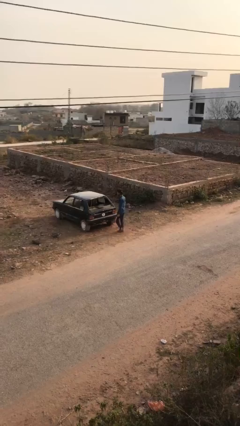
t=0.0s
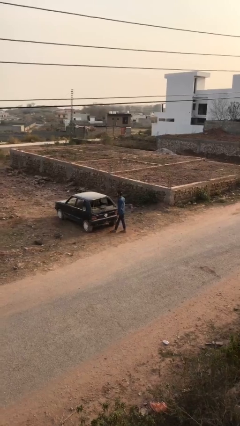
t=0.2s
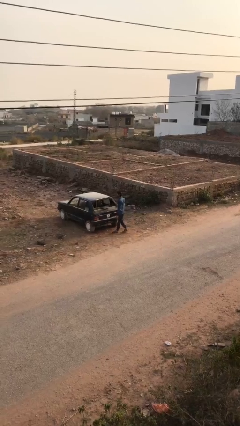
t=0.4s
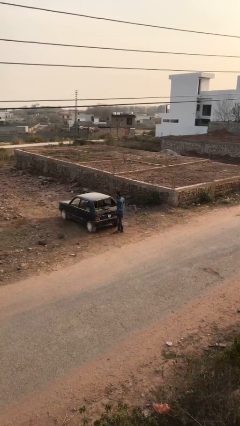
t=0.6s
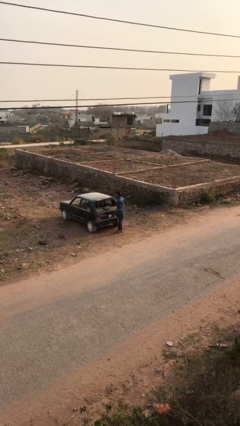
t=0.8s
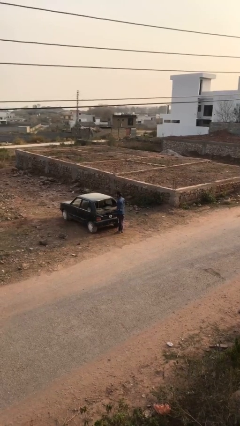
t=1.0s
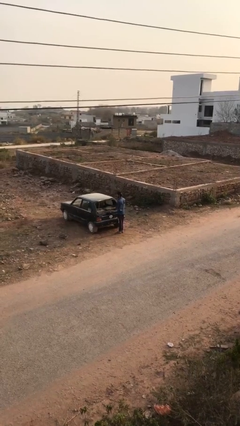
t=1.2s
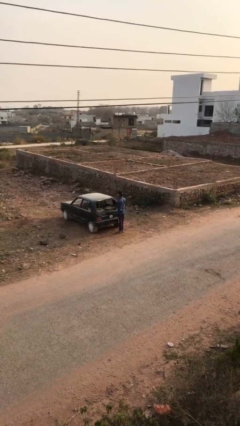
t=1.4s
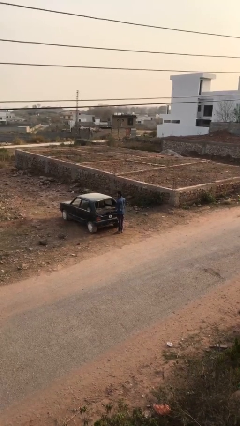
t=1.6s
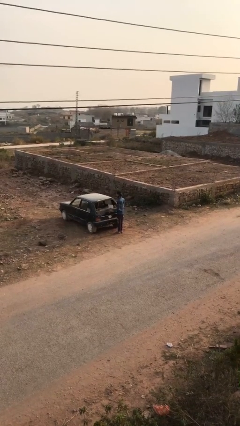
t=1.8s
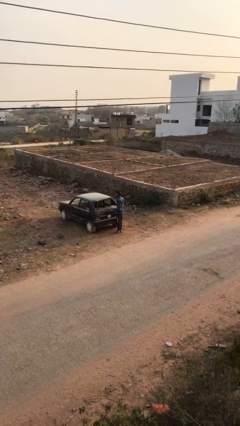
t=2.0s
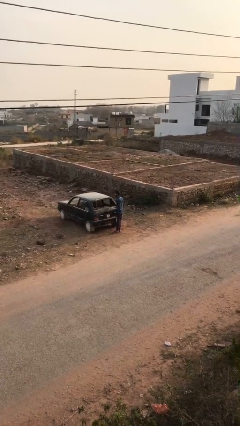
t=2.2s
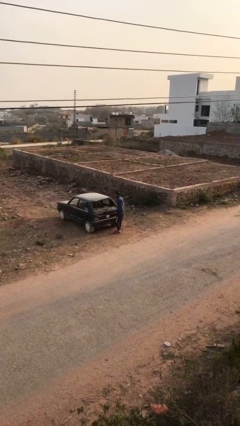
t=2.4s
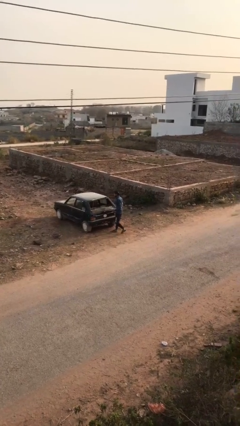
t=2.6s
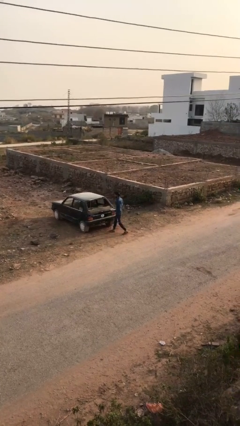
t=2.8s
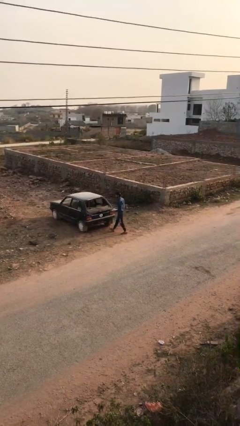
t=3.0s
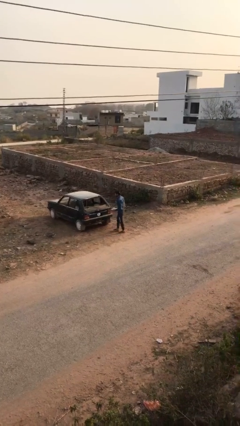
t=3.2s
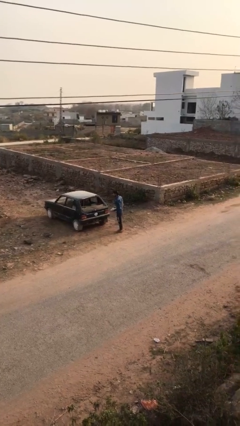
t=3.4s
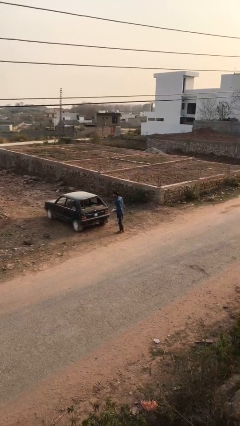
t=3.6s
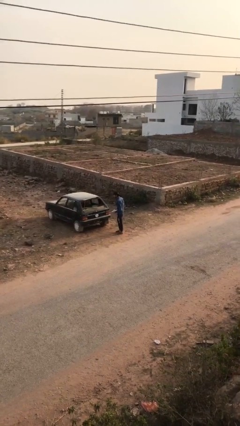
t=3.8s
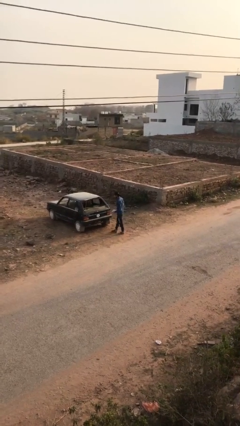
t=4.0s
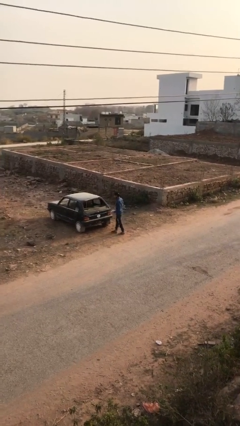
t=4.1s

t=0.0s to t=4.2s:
person unloads car

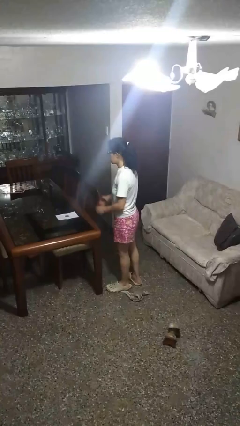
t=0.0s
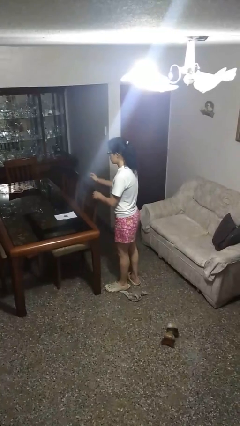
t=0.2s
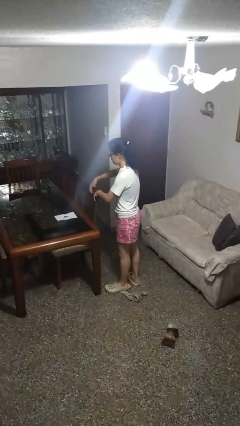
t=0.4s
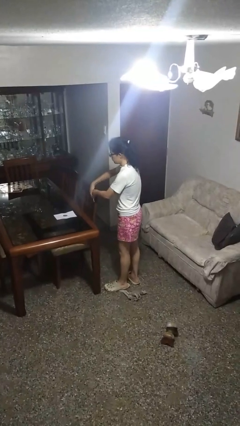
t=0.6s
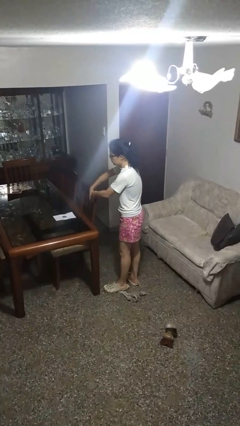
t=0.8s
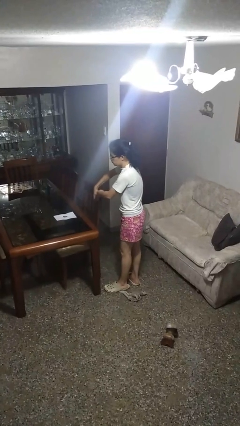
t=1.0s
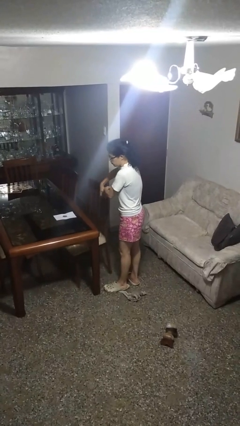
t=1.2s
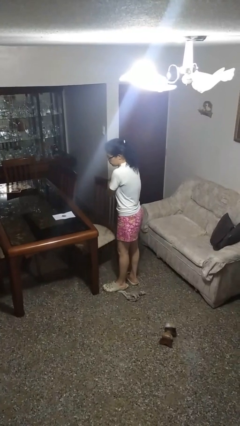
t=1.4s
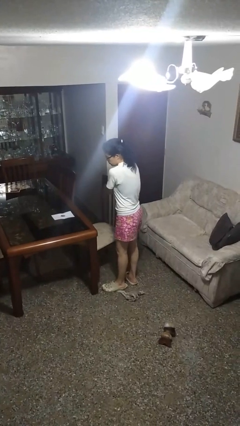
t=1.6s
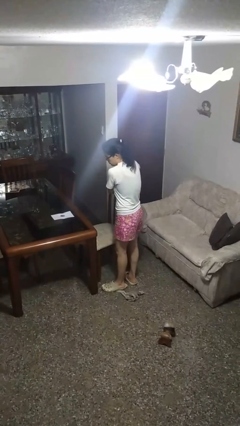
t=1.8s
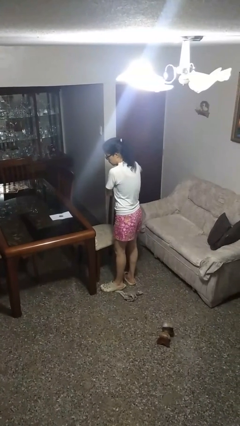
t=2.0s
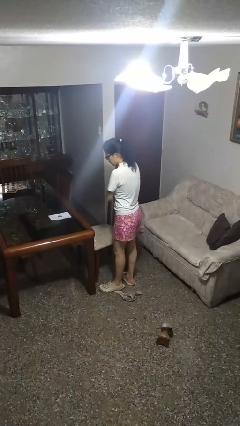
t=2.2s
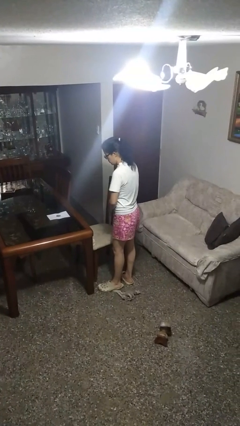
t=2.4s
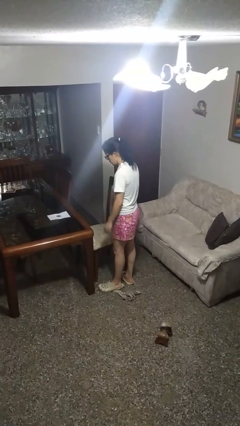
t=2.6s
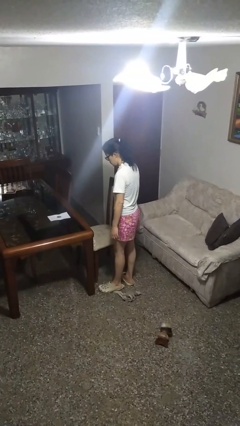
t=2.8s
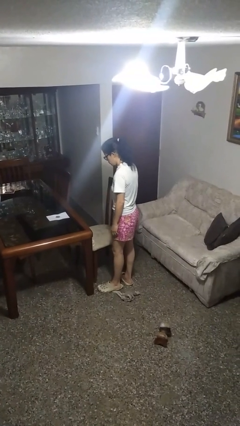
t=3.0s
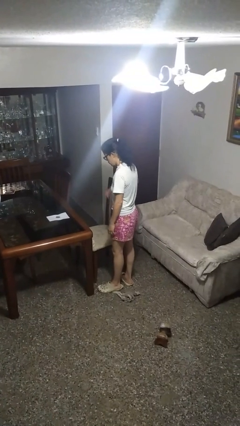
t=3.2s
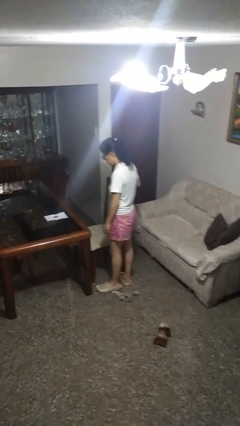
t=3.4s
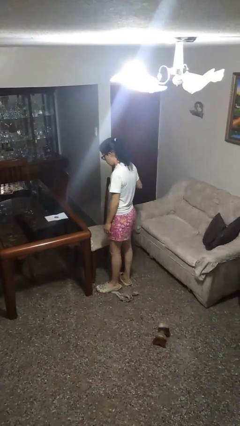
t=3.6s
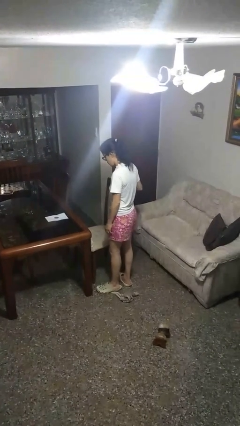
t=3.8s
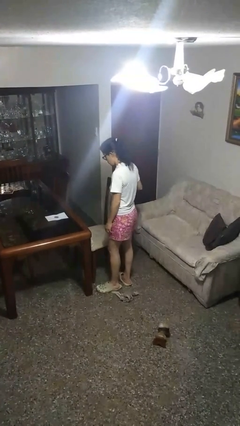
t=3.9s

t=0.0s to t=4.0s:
person pulls out chair

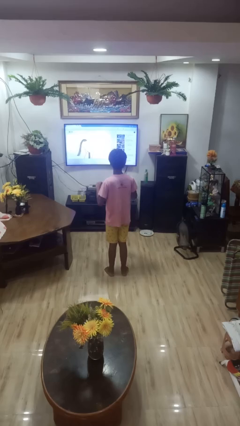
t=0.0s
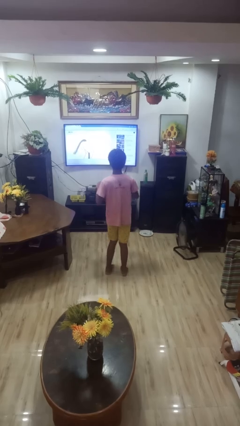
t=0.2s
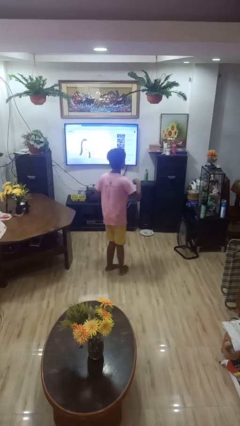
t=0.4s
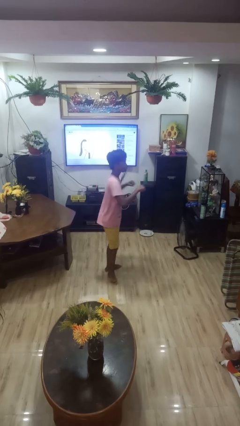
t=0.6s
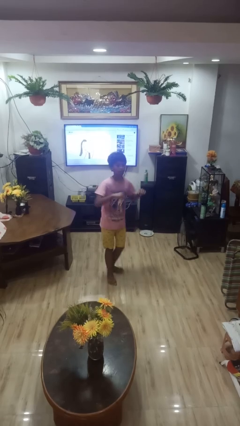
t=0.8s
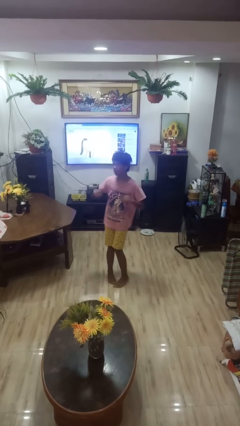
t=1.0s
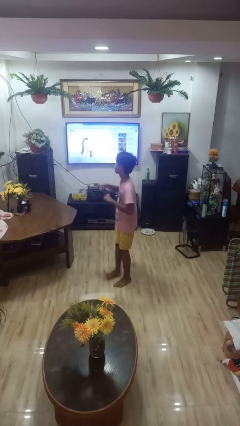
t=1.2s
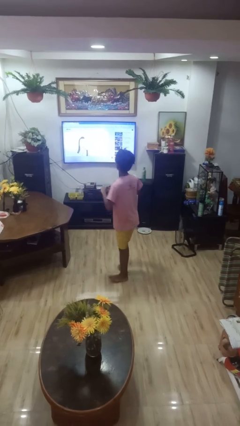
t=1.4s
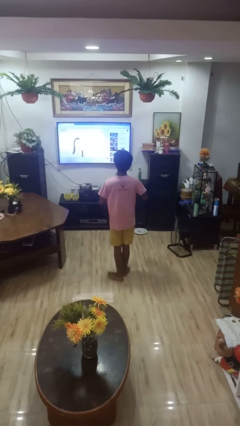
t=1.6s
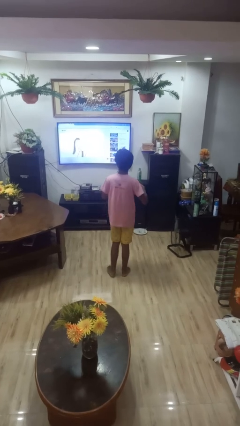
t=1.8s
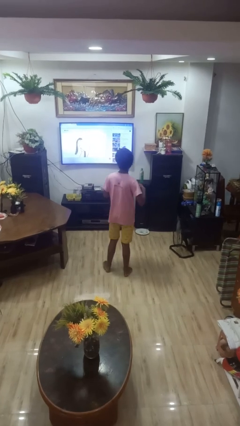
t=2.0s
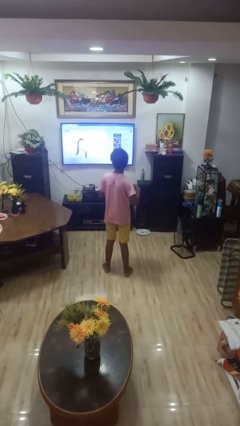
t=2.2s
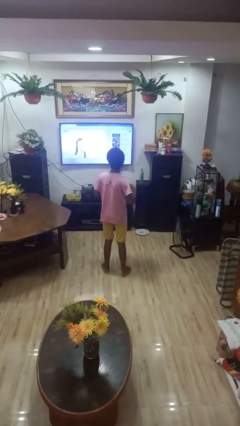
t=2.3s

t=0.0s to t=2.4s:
person twirls

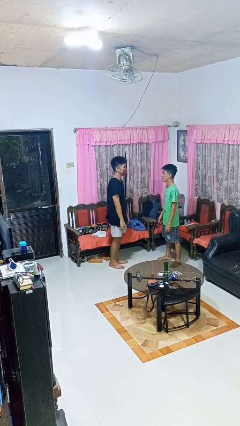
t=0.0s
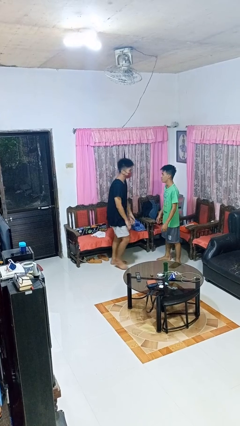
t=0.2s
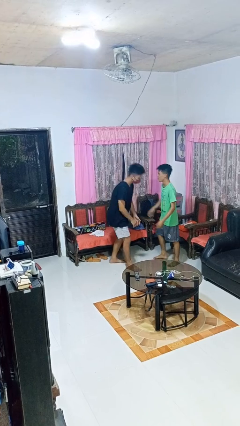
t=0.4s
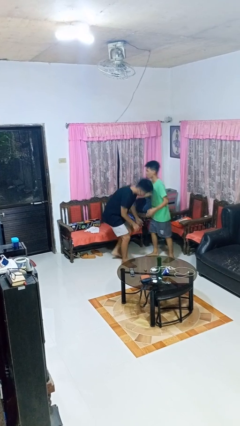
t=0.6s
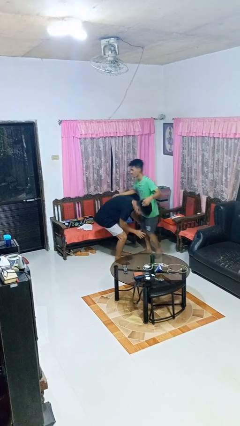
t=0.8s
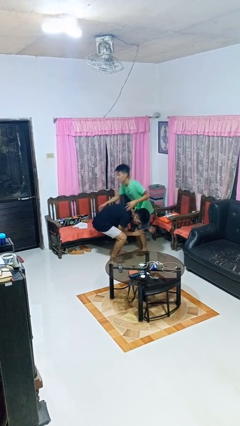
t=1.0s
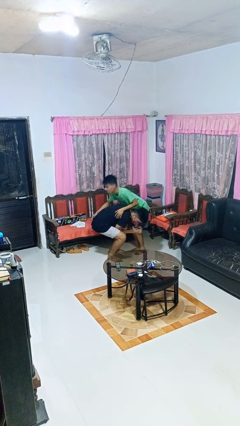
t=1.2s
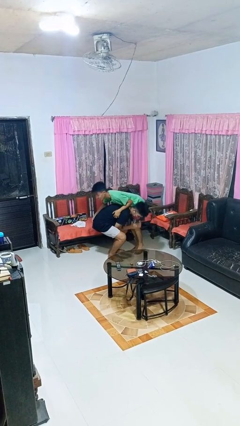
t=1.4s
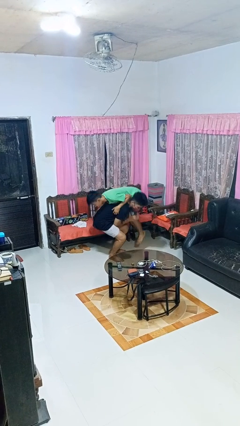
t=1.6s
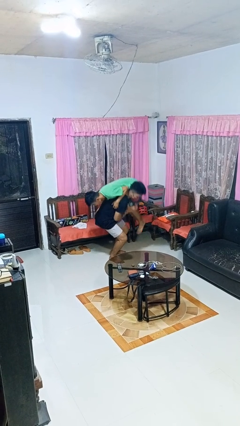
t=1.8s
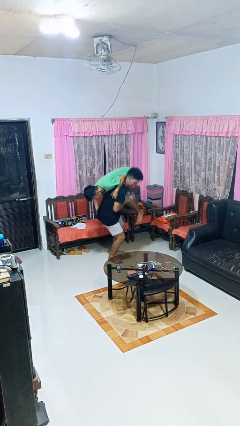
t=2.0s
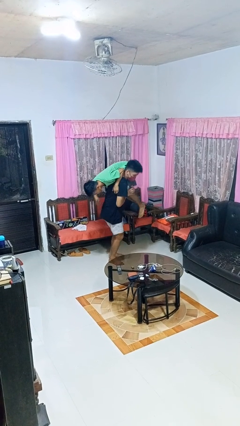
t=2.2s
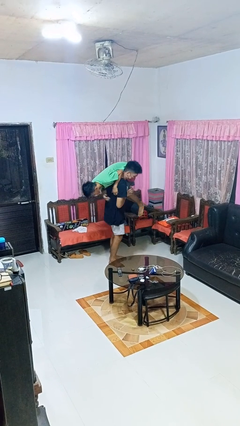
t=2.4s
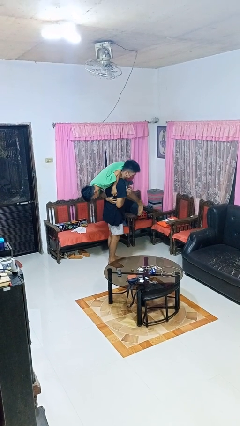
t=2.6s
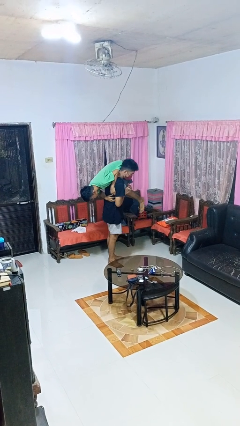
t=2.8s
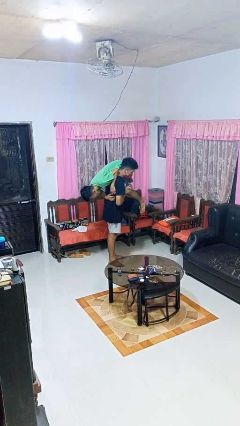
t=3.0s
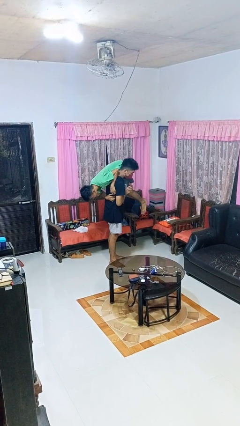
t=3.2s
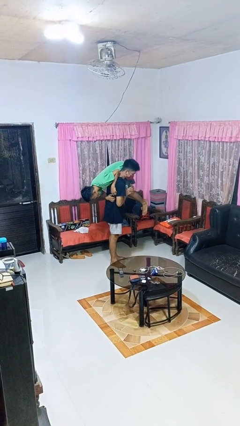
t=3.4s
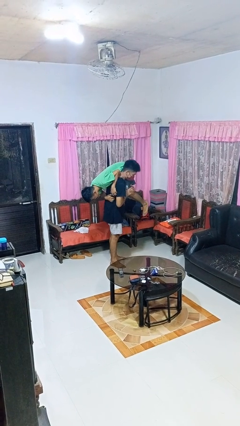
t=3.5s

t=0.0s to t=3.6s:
person carries person over shoulder

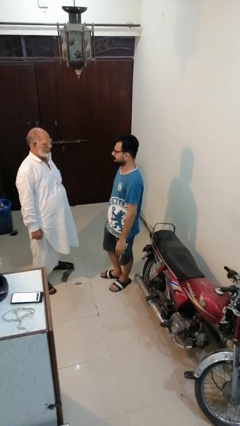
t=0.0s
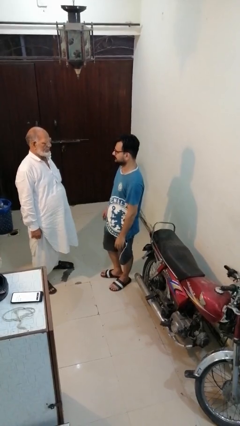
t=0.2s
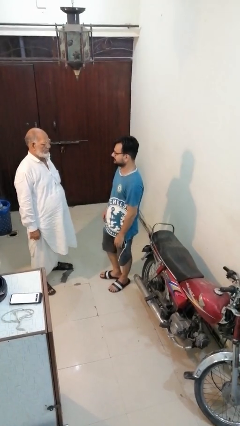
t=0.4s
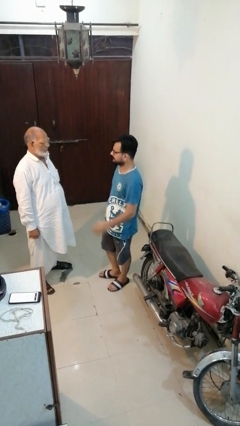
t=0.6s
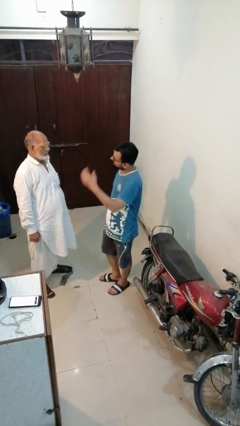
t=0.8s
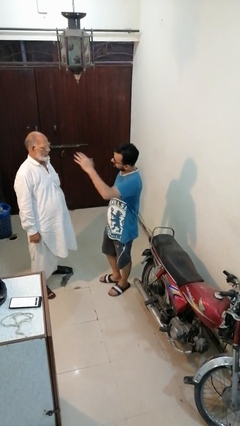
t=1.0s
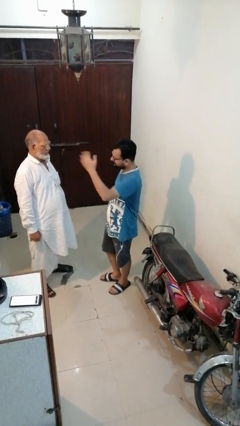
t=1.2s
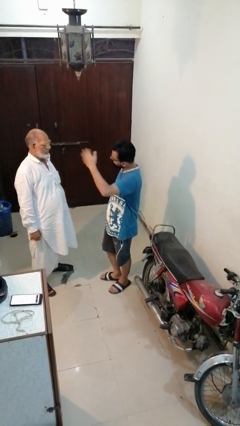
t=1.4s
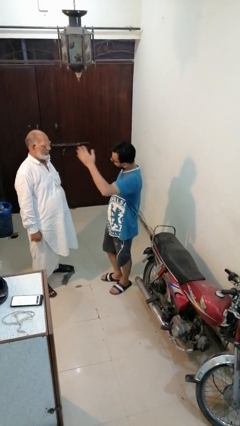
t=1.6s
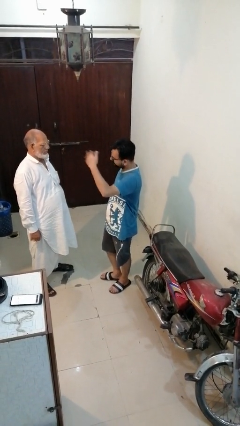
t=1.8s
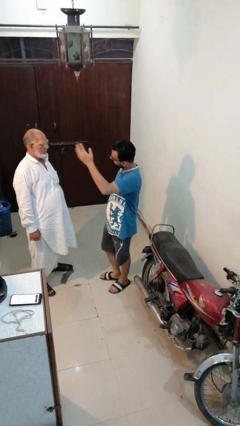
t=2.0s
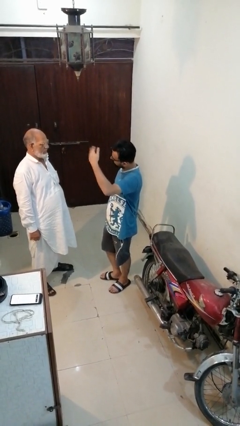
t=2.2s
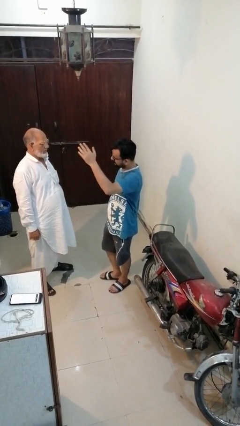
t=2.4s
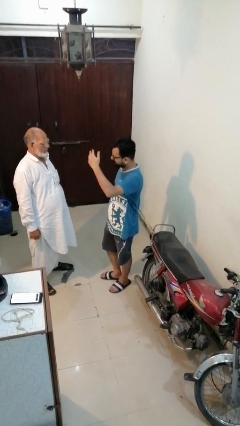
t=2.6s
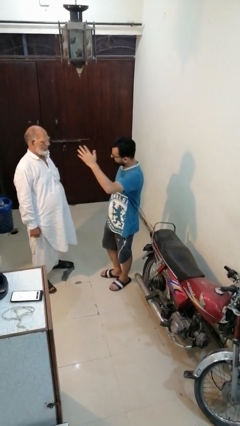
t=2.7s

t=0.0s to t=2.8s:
person shoves person

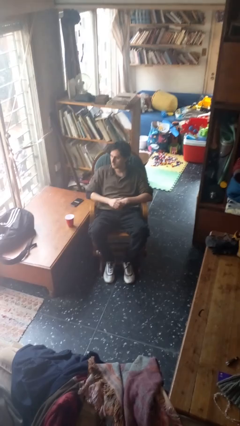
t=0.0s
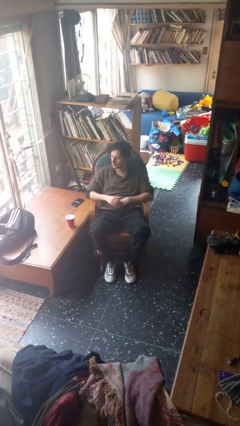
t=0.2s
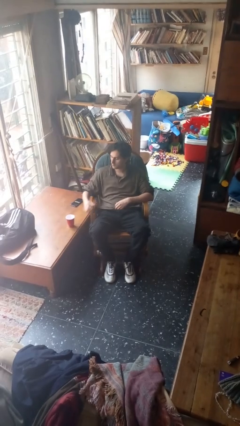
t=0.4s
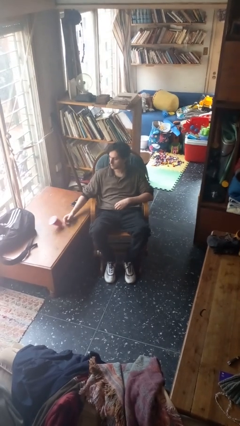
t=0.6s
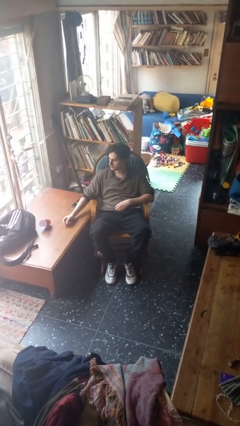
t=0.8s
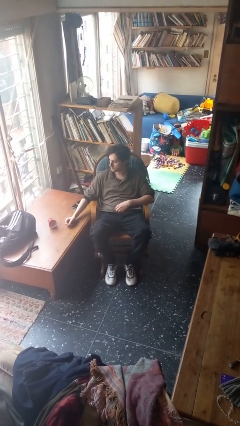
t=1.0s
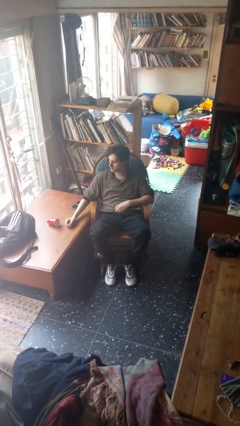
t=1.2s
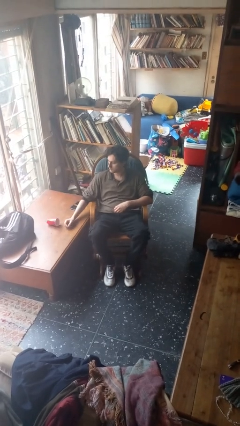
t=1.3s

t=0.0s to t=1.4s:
person knocks over glass
